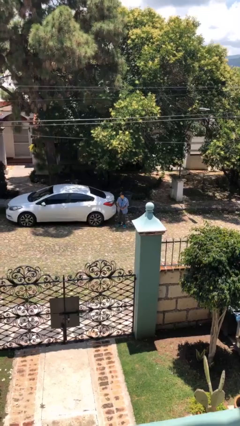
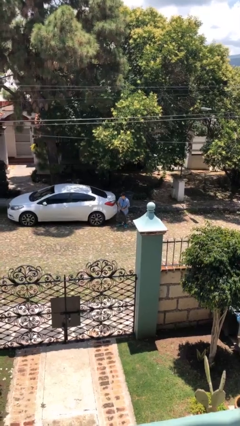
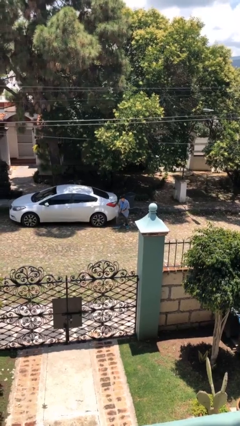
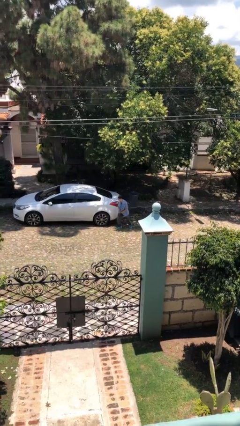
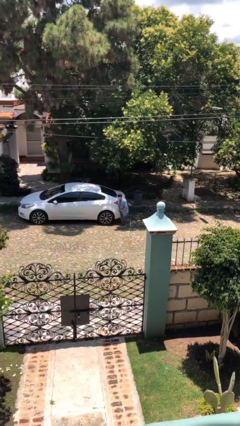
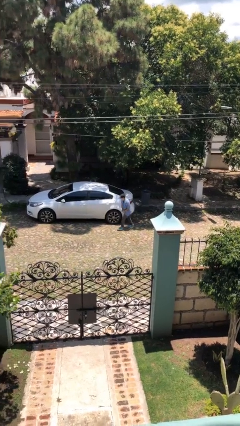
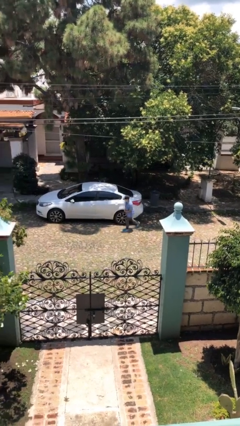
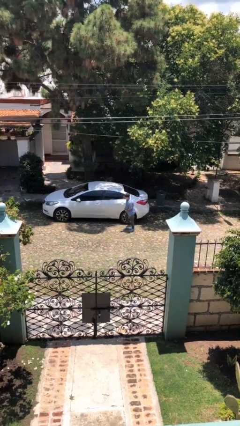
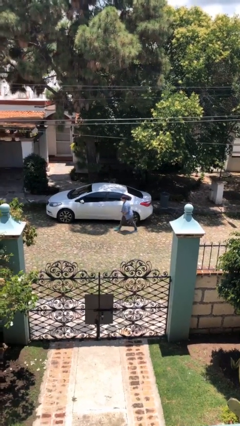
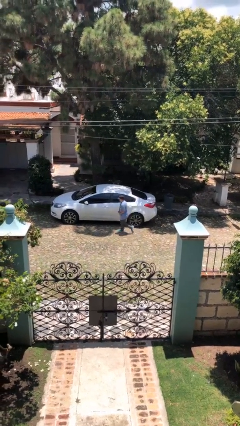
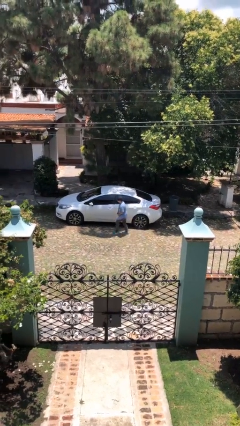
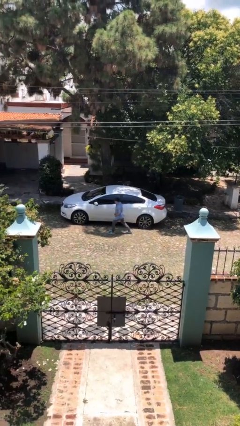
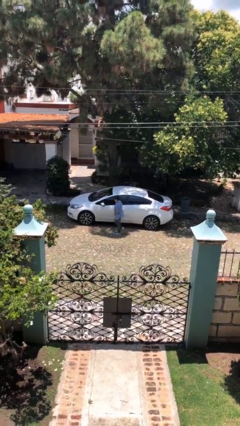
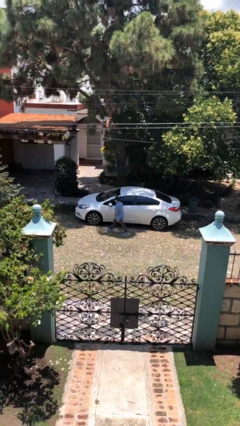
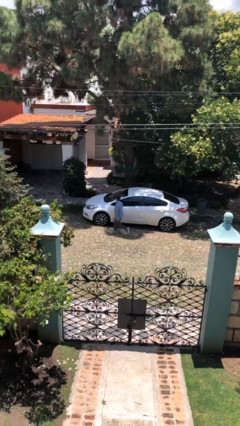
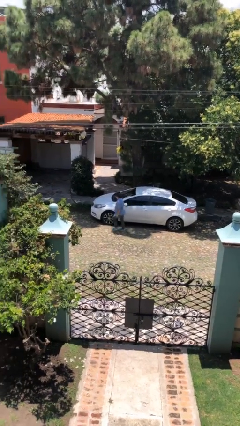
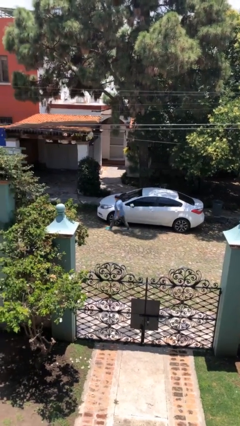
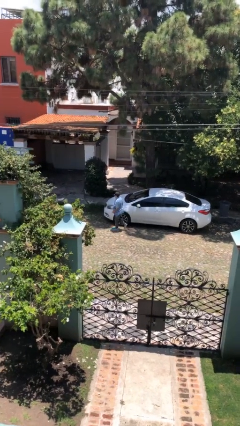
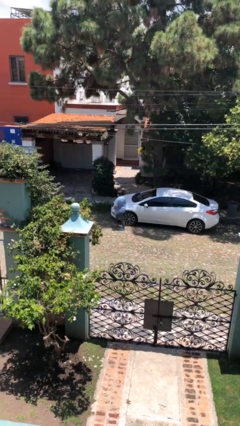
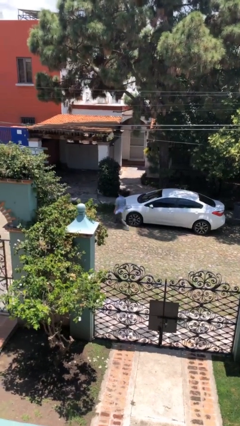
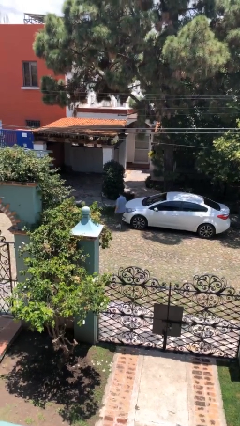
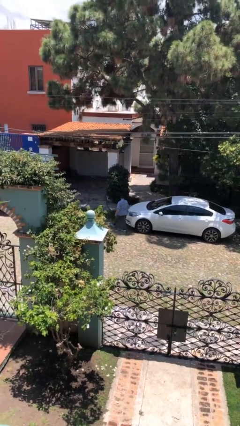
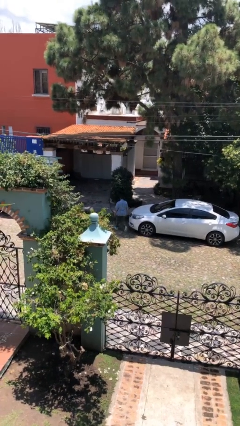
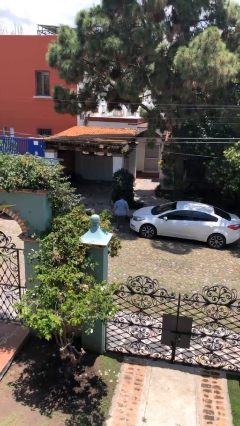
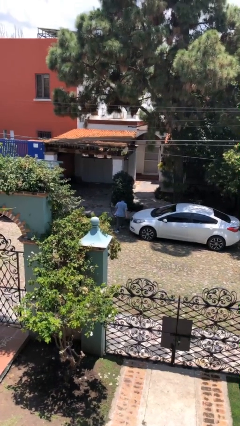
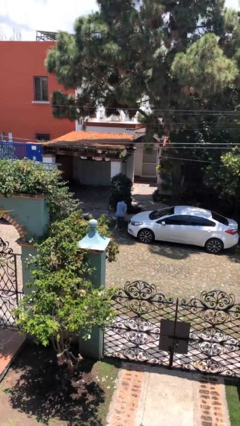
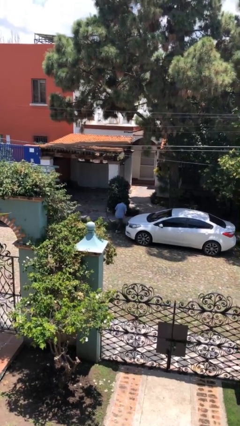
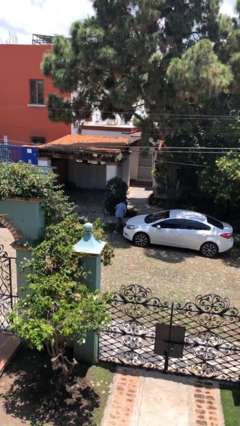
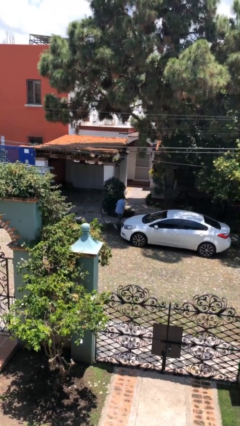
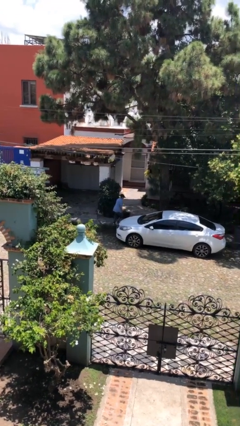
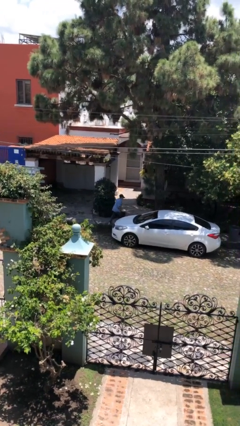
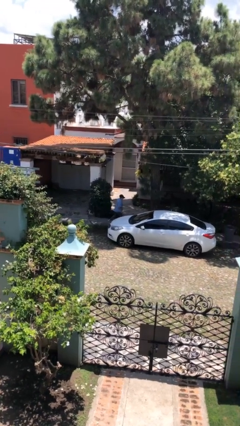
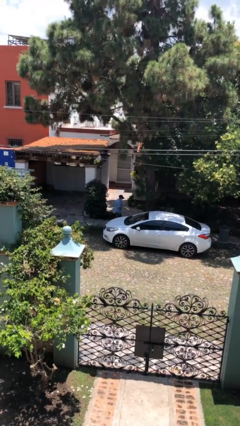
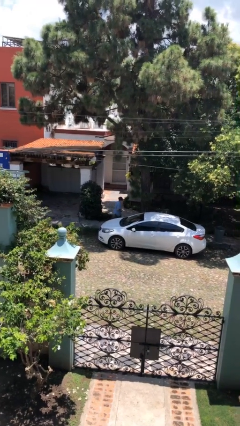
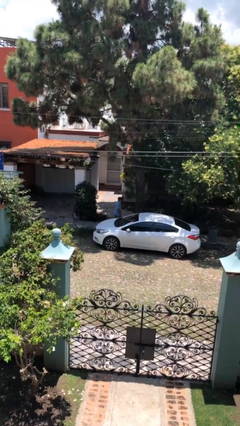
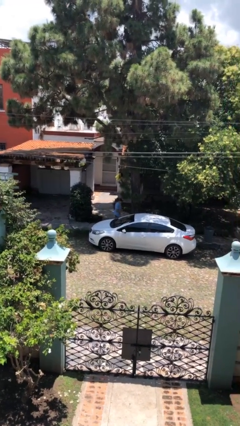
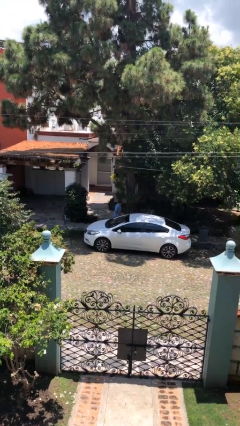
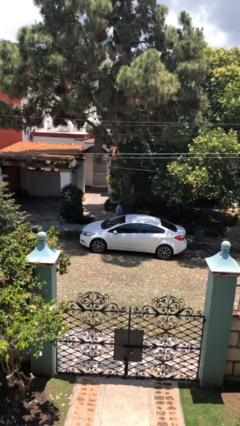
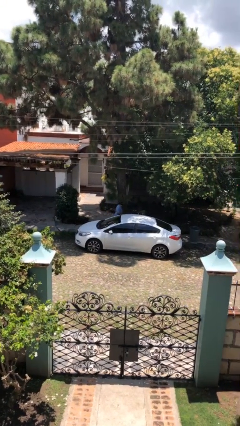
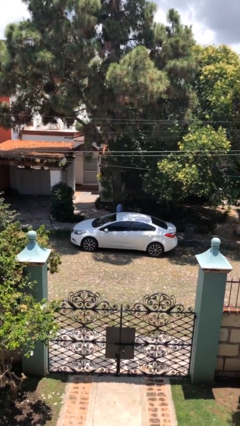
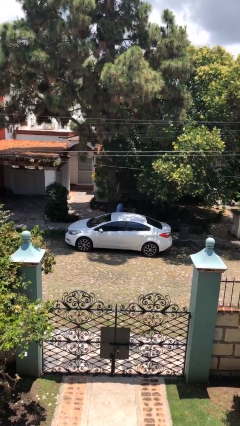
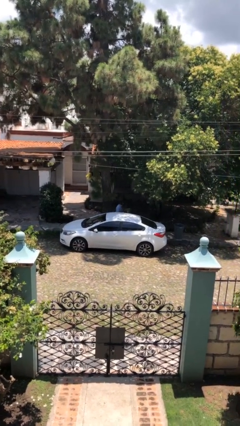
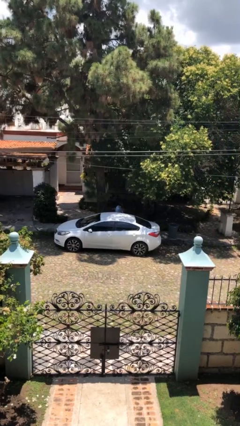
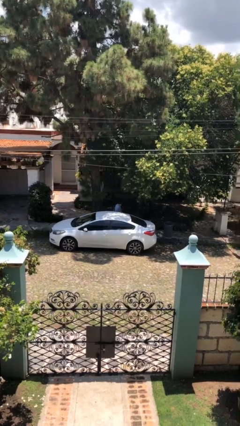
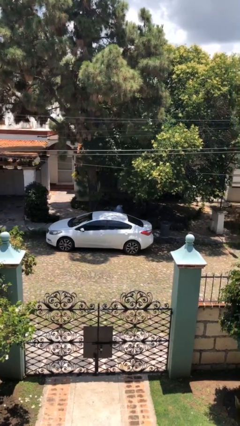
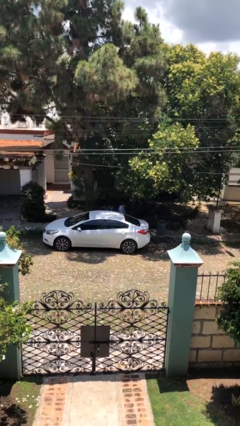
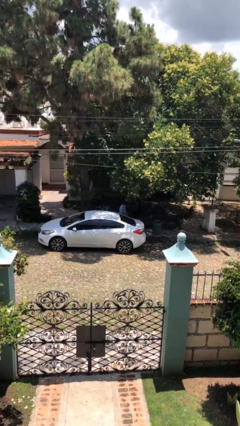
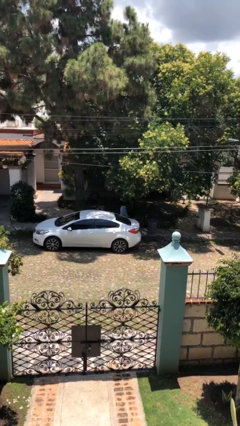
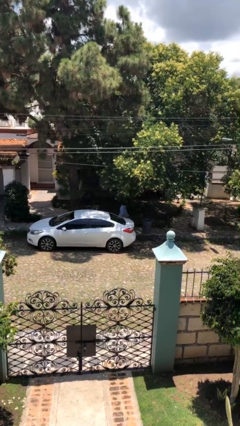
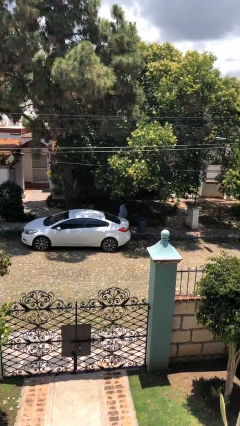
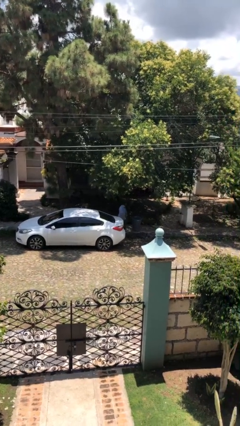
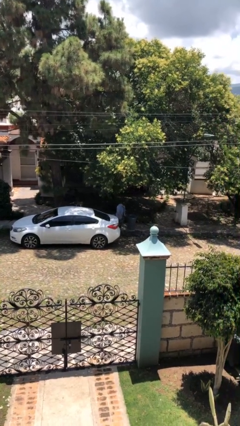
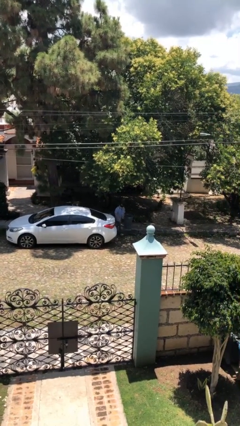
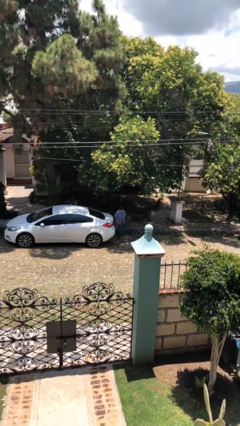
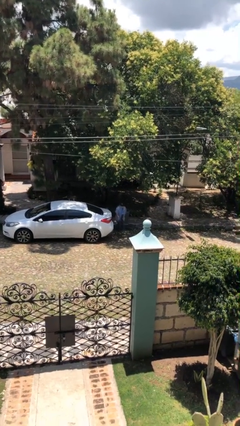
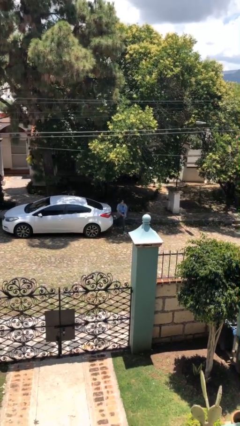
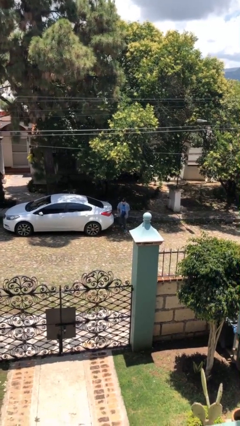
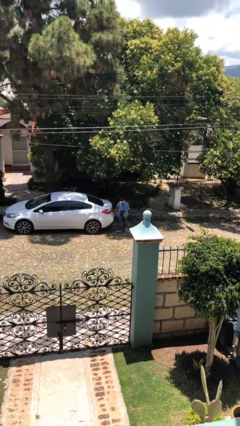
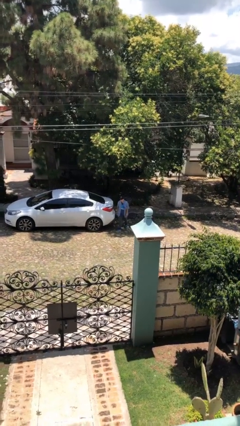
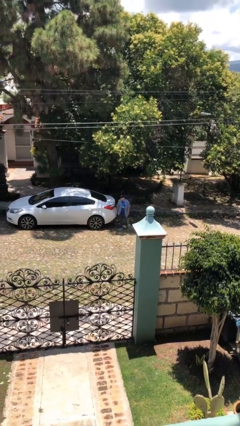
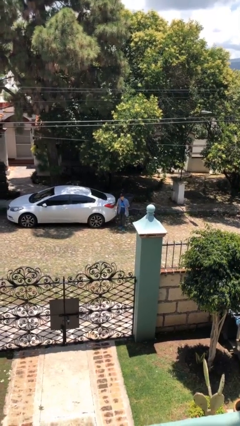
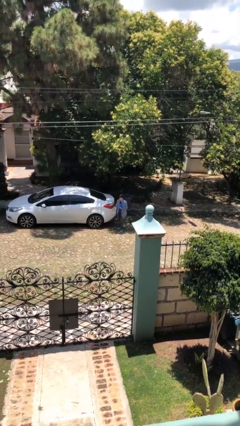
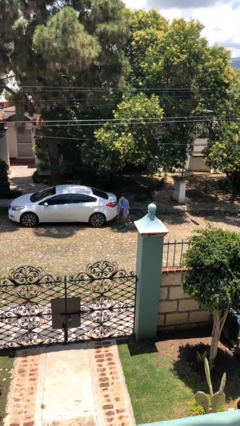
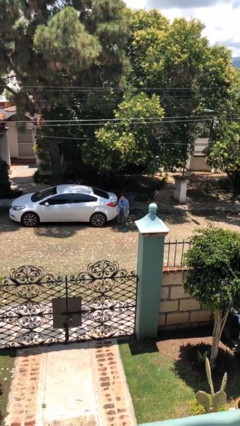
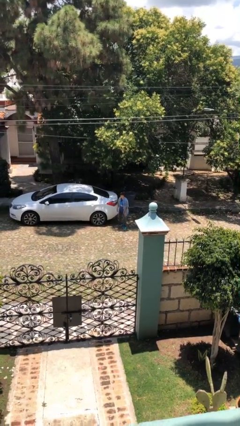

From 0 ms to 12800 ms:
person walks around car

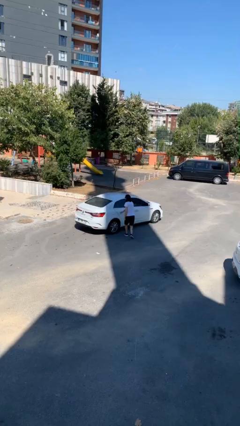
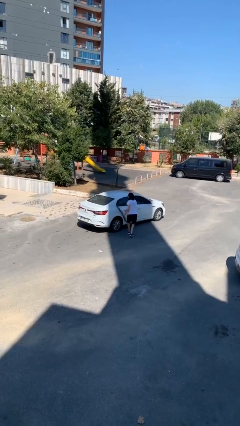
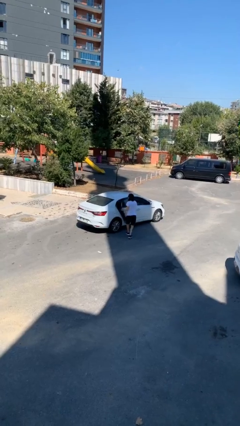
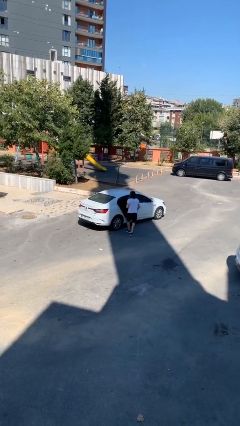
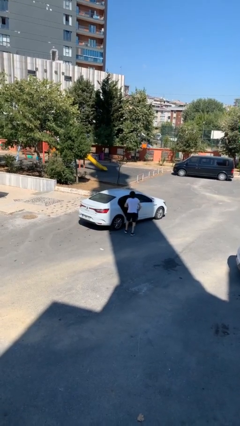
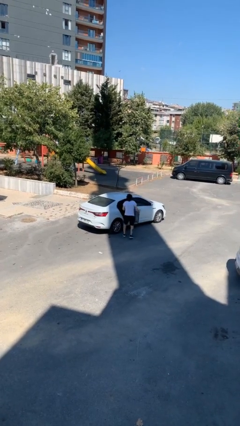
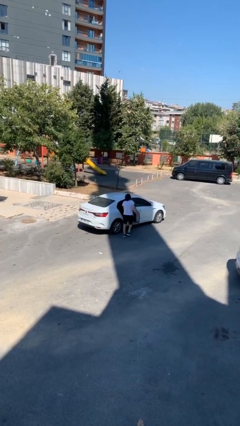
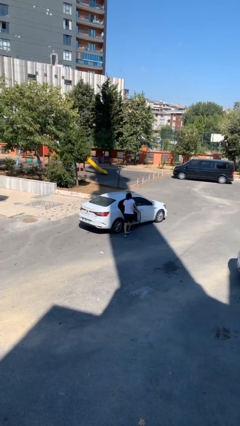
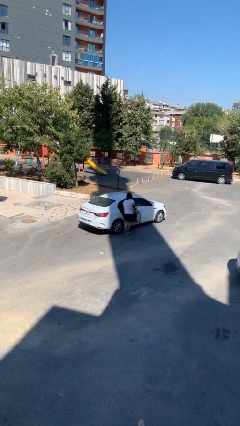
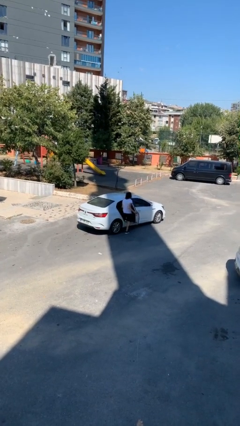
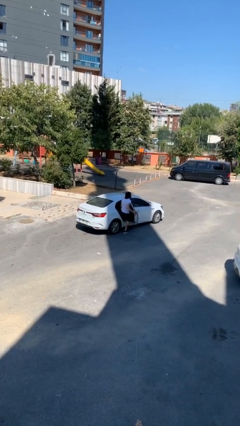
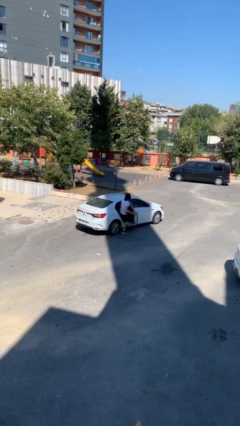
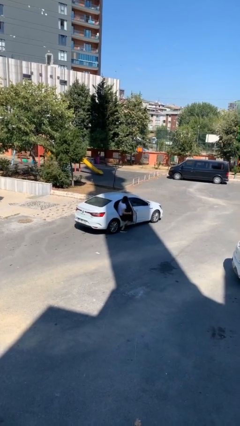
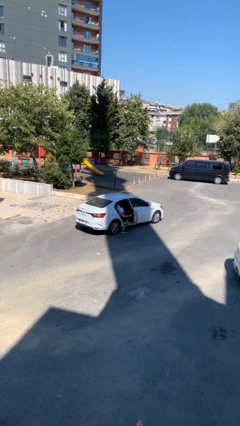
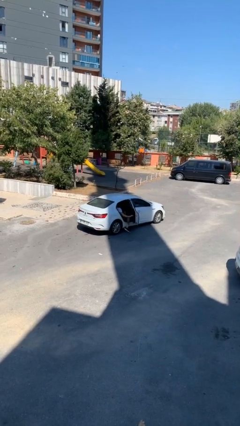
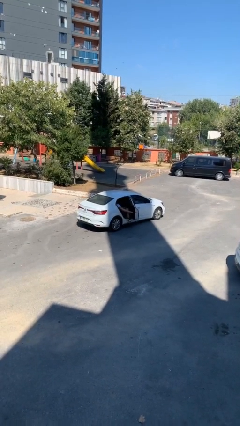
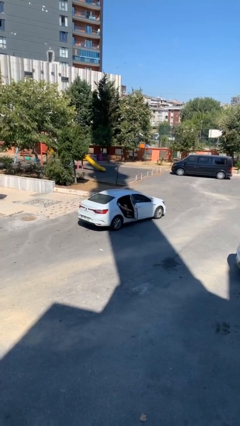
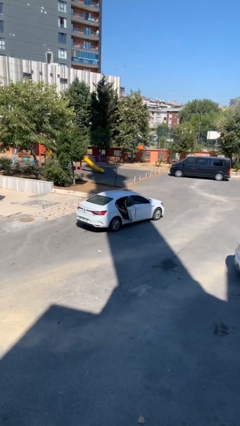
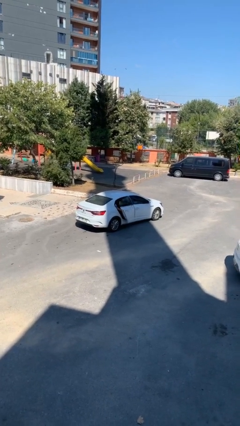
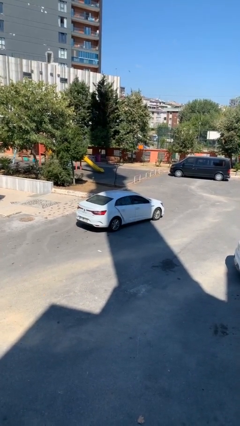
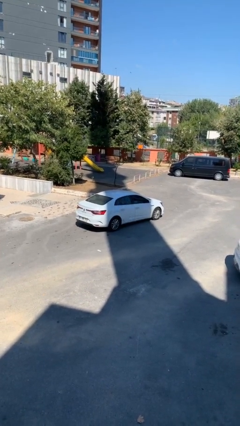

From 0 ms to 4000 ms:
car picks up person

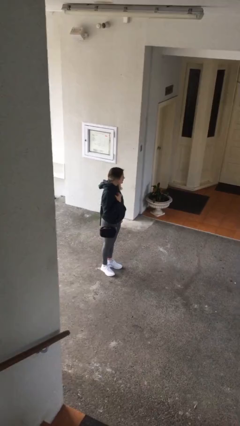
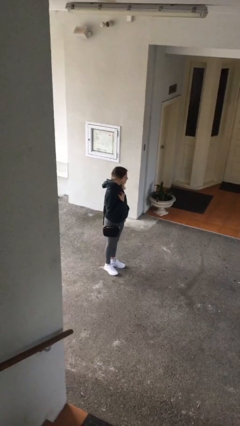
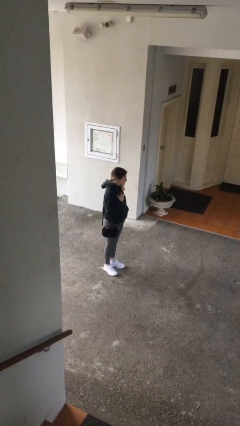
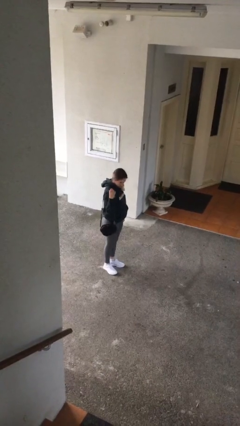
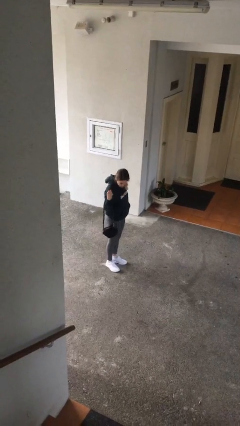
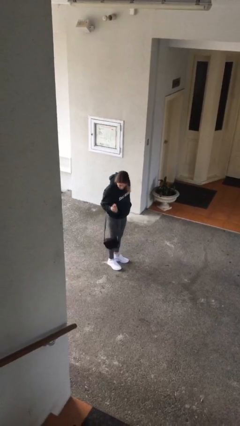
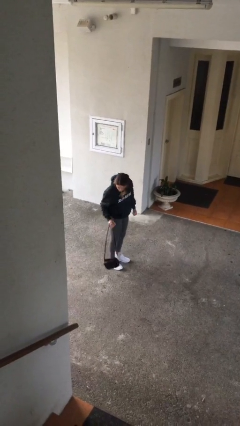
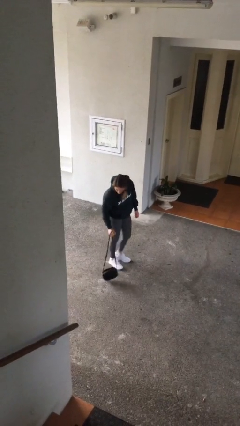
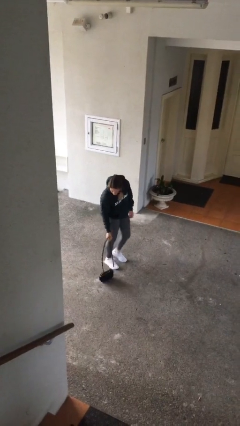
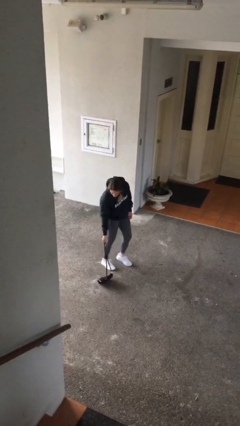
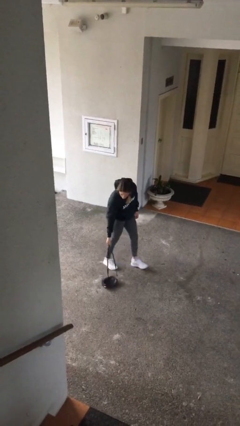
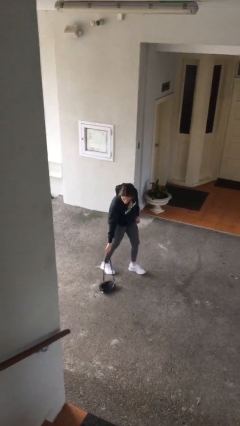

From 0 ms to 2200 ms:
person puts down object on floor
